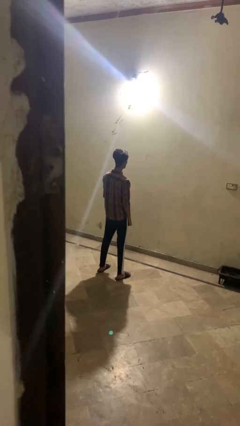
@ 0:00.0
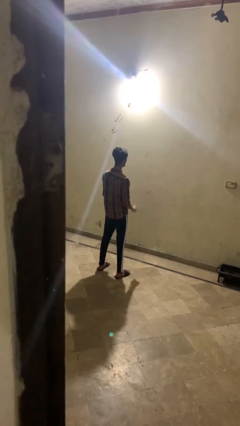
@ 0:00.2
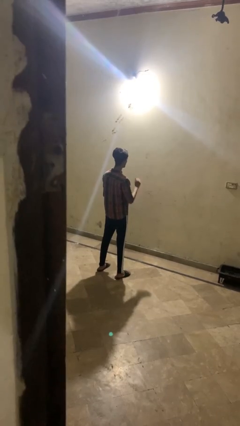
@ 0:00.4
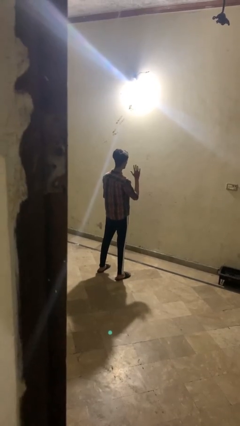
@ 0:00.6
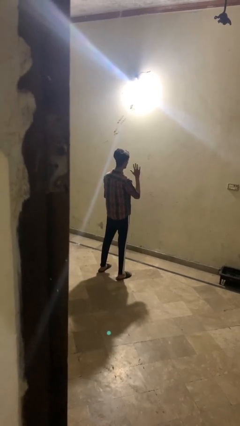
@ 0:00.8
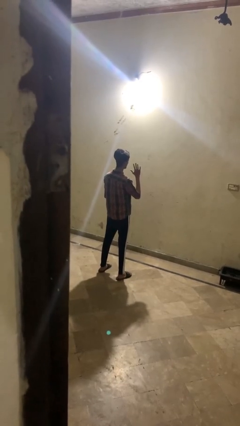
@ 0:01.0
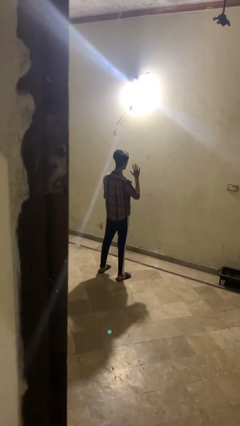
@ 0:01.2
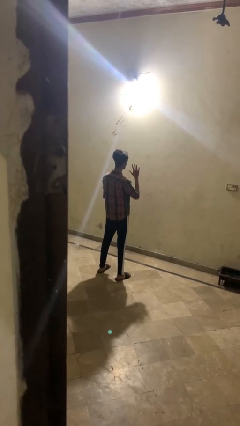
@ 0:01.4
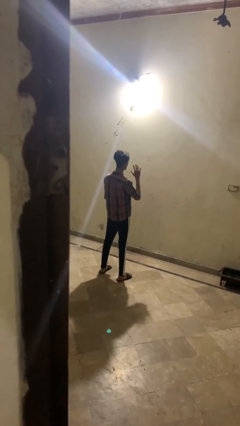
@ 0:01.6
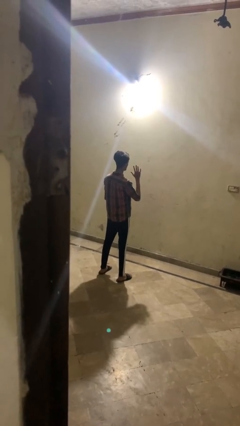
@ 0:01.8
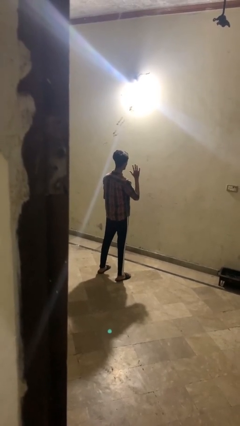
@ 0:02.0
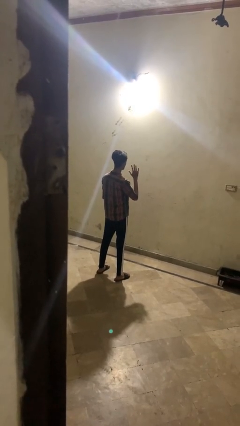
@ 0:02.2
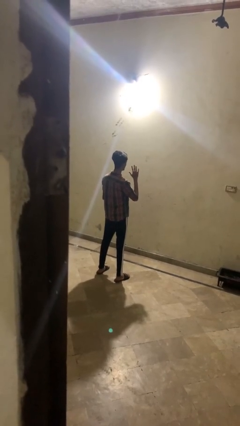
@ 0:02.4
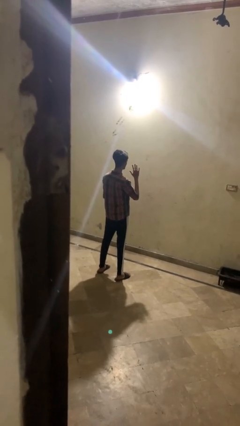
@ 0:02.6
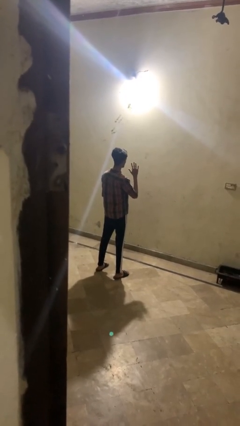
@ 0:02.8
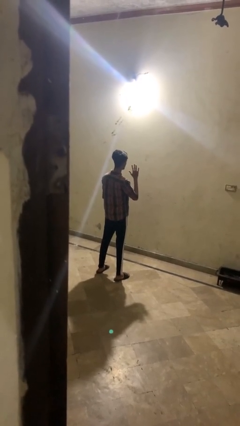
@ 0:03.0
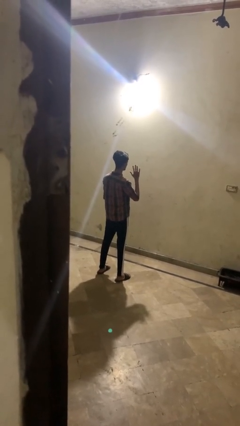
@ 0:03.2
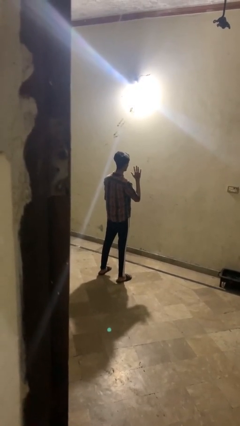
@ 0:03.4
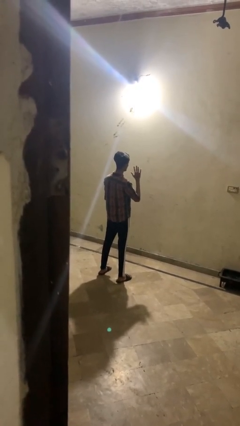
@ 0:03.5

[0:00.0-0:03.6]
person gestures number five

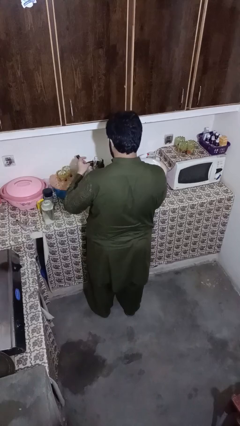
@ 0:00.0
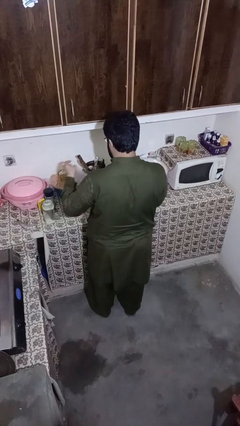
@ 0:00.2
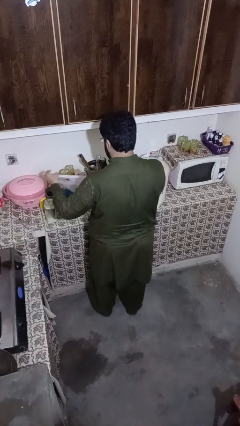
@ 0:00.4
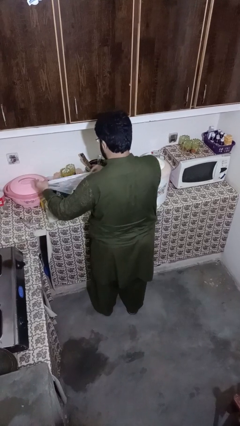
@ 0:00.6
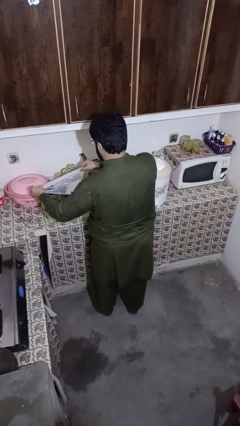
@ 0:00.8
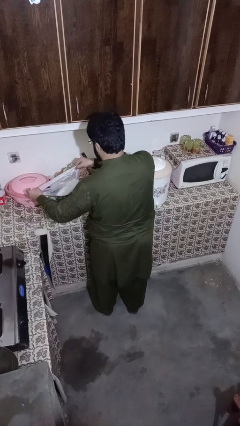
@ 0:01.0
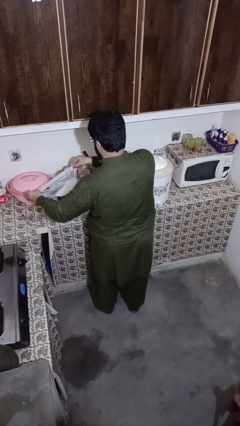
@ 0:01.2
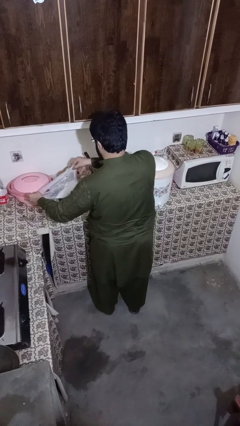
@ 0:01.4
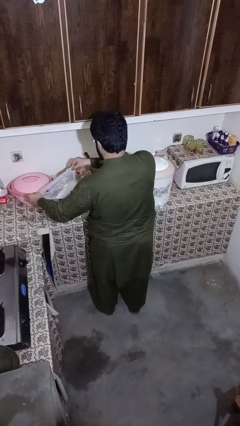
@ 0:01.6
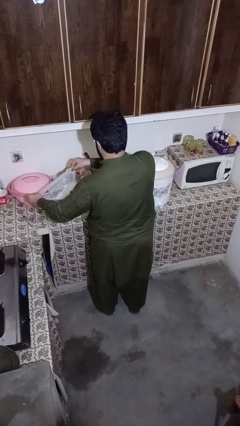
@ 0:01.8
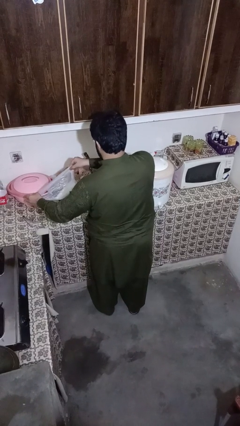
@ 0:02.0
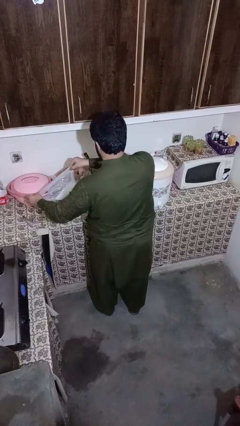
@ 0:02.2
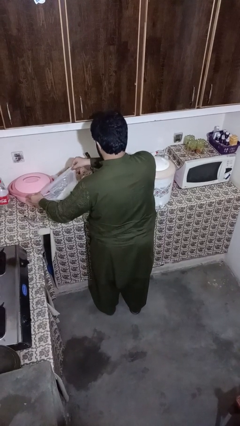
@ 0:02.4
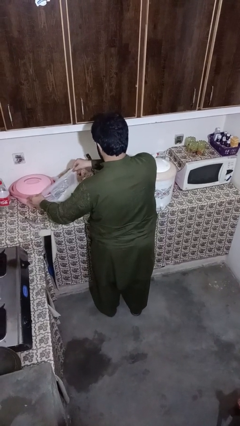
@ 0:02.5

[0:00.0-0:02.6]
person pours into bowl

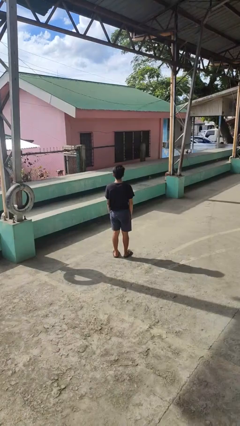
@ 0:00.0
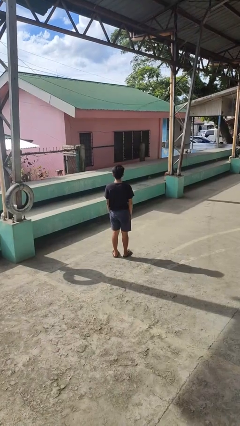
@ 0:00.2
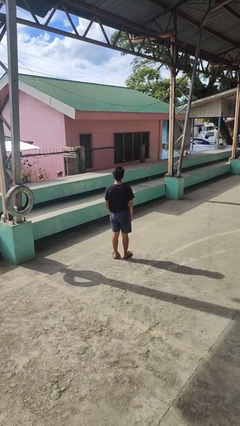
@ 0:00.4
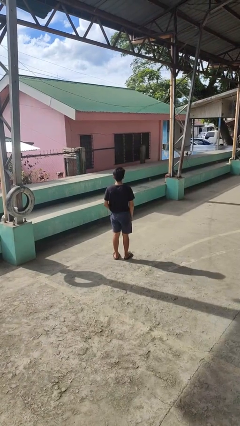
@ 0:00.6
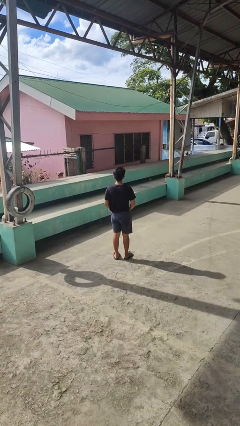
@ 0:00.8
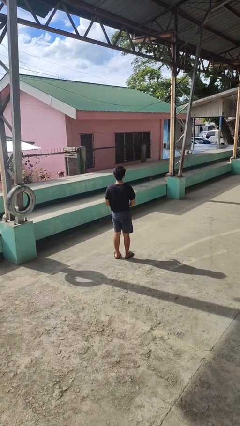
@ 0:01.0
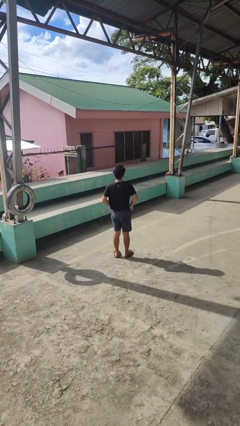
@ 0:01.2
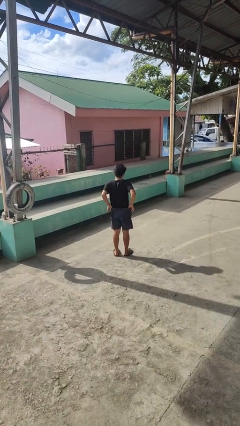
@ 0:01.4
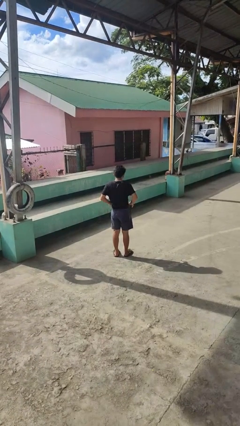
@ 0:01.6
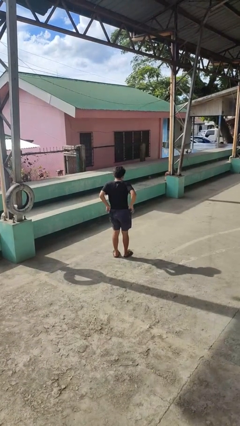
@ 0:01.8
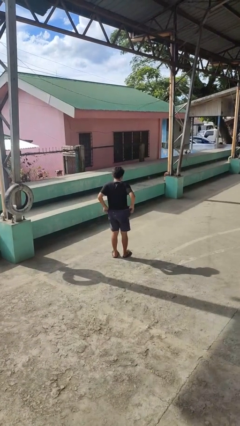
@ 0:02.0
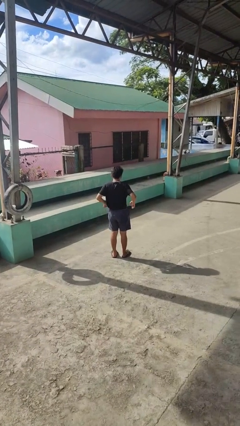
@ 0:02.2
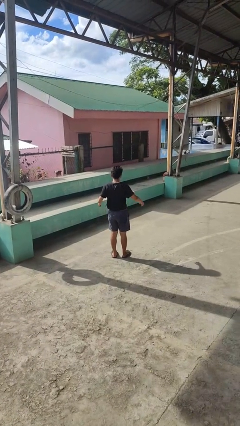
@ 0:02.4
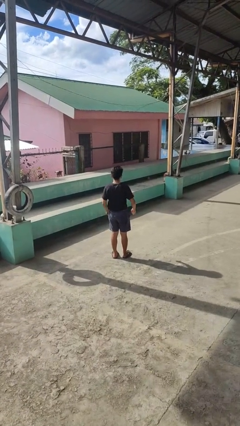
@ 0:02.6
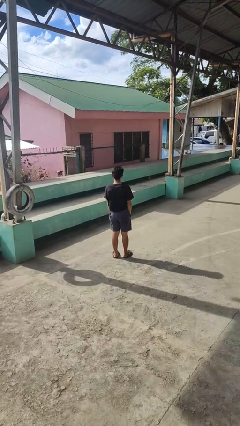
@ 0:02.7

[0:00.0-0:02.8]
person hikes up pants

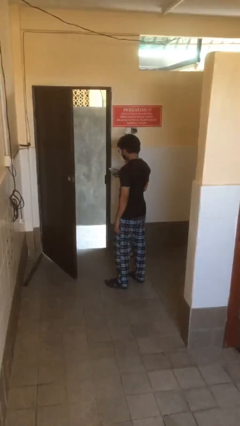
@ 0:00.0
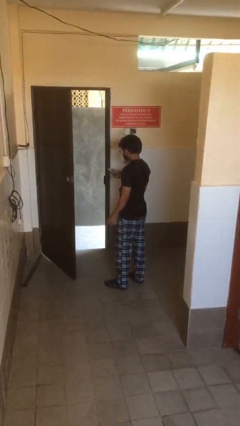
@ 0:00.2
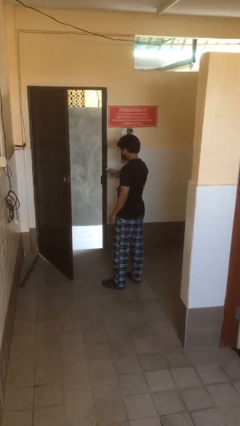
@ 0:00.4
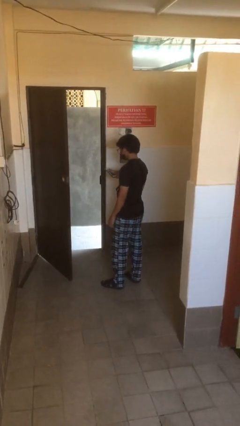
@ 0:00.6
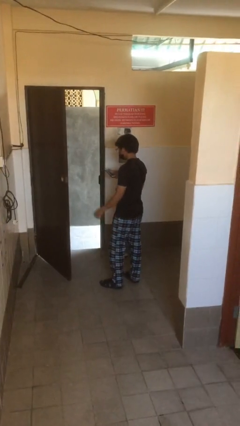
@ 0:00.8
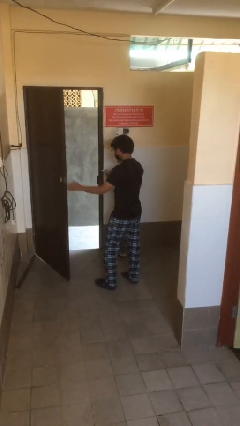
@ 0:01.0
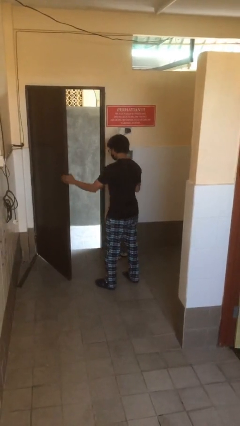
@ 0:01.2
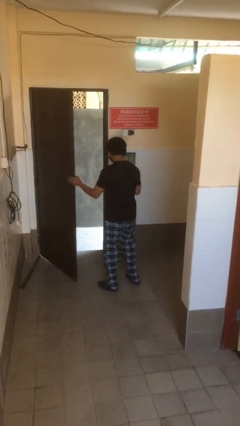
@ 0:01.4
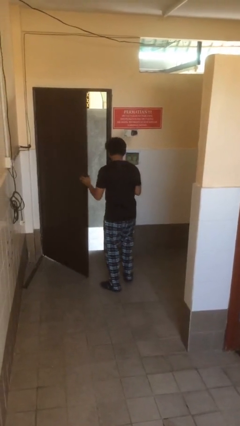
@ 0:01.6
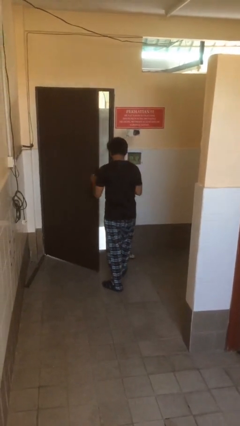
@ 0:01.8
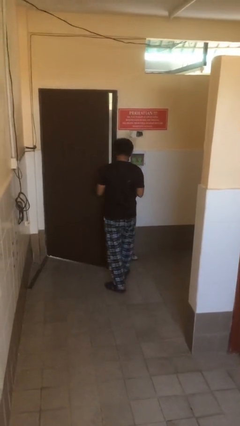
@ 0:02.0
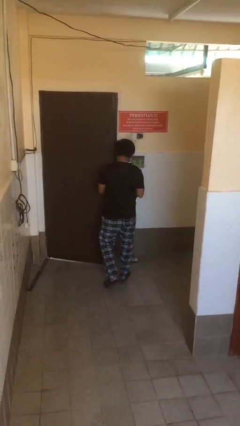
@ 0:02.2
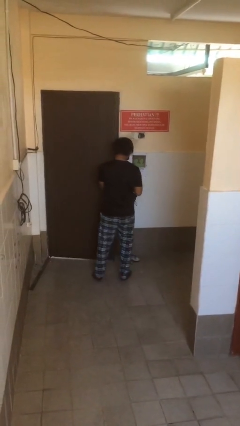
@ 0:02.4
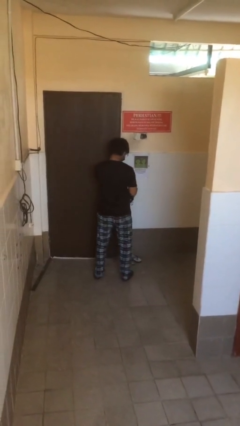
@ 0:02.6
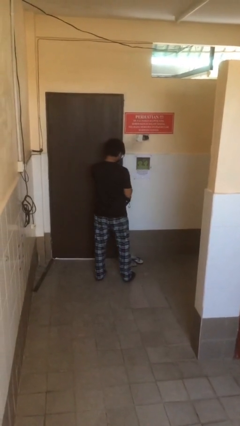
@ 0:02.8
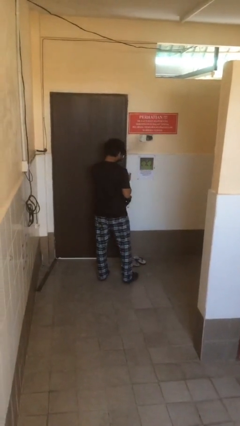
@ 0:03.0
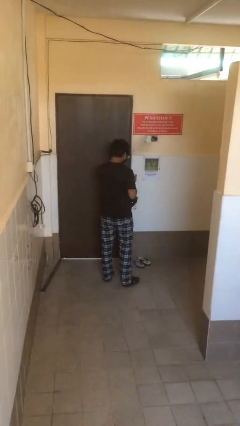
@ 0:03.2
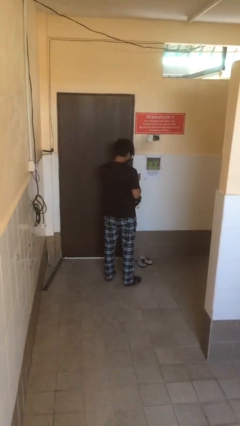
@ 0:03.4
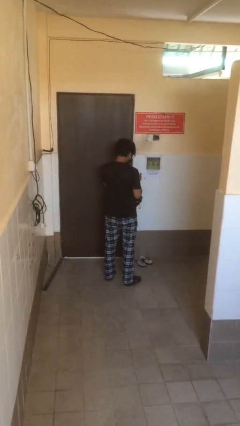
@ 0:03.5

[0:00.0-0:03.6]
person closes facility door

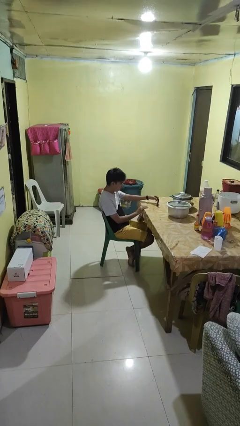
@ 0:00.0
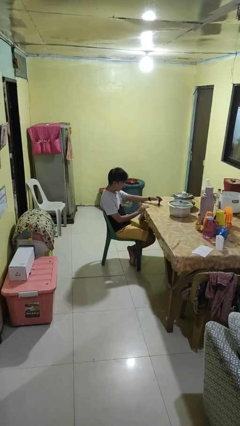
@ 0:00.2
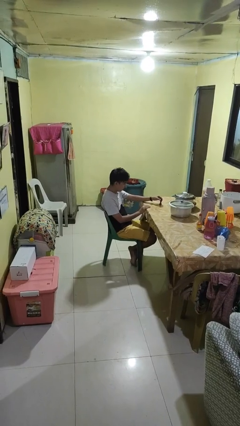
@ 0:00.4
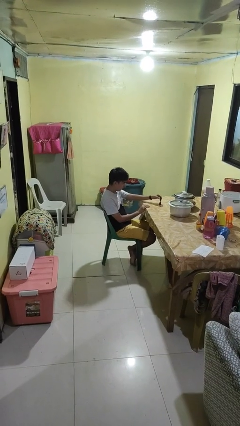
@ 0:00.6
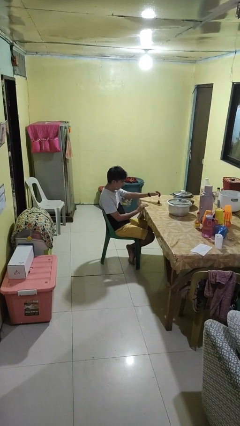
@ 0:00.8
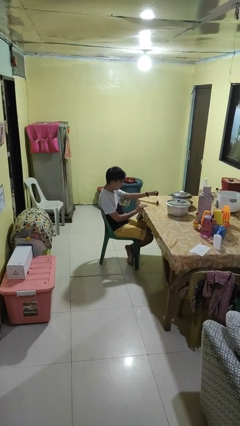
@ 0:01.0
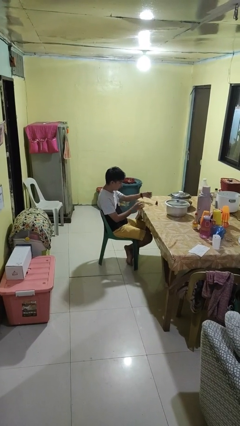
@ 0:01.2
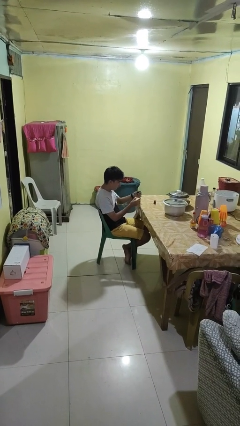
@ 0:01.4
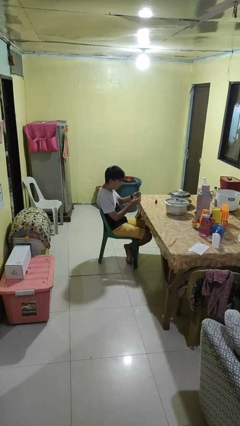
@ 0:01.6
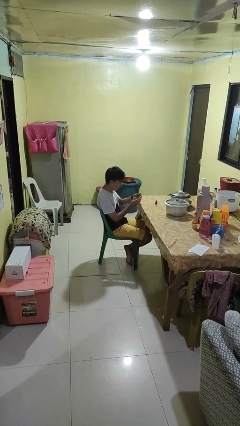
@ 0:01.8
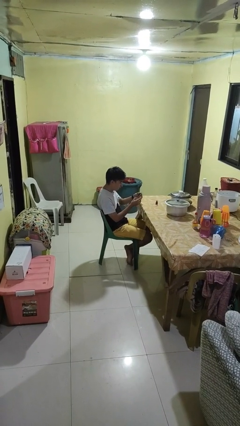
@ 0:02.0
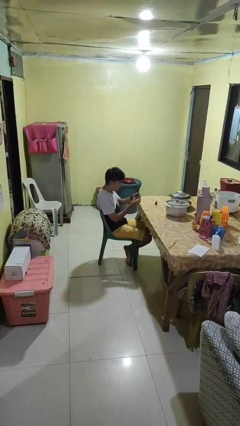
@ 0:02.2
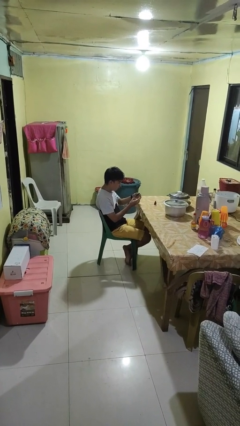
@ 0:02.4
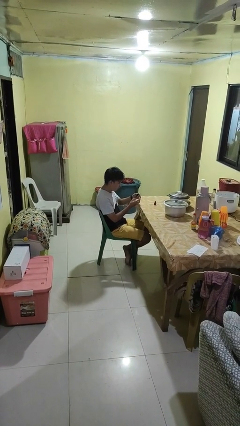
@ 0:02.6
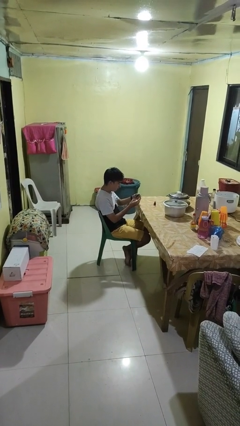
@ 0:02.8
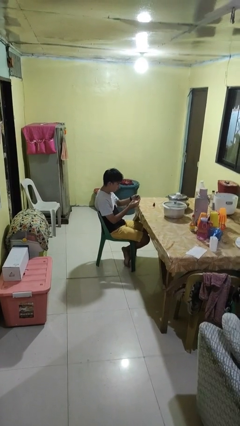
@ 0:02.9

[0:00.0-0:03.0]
person paints fingernails

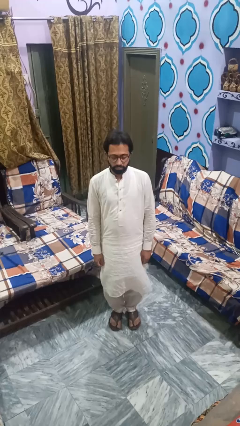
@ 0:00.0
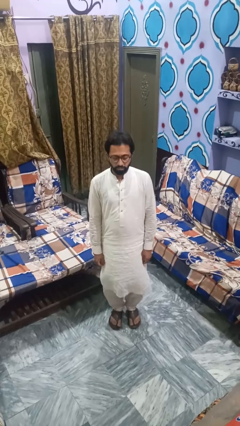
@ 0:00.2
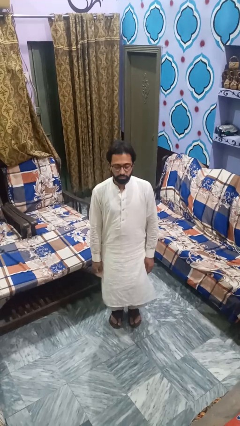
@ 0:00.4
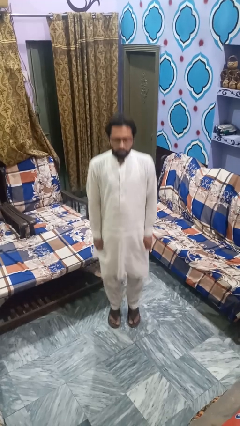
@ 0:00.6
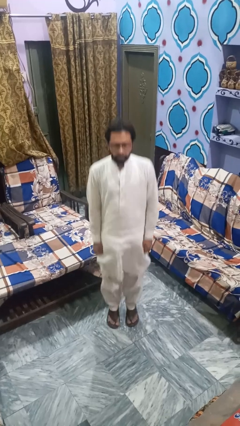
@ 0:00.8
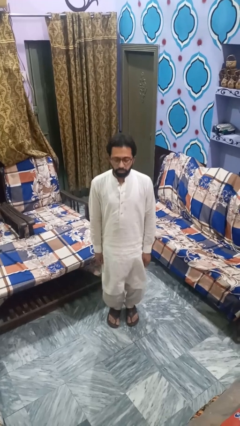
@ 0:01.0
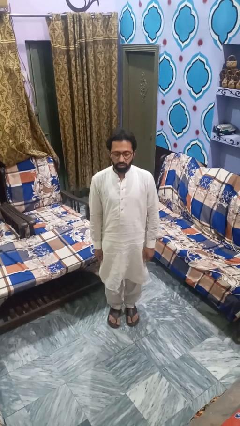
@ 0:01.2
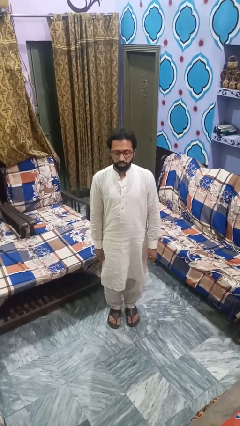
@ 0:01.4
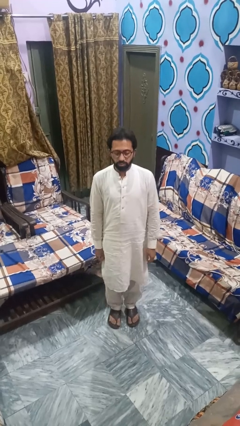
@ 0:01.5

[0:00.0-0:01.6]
person jumps
